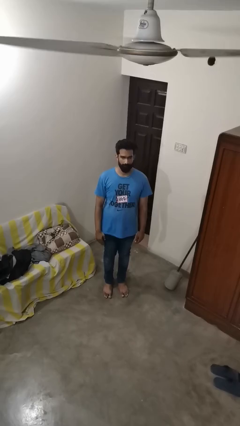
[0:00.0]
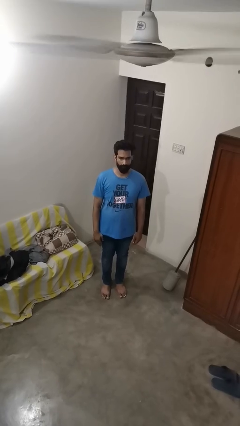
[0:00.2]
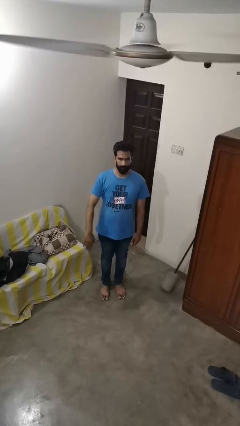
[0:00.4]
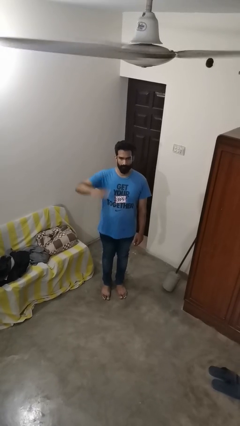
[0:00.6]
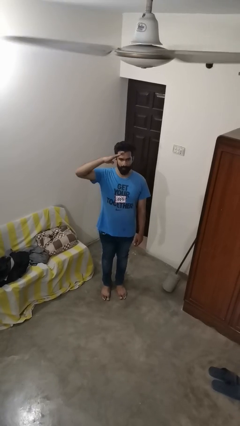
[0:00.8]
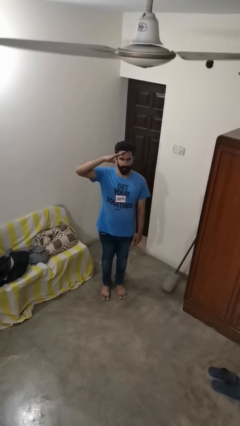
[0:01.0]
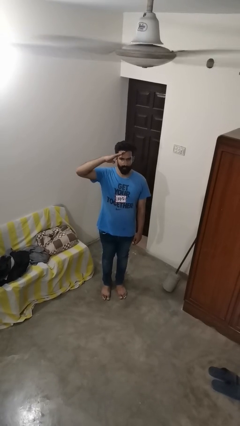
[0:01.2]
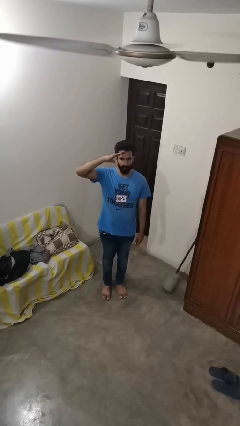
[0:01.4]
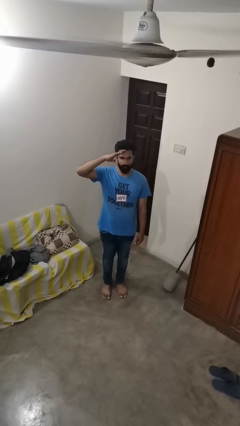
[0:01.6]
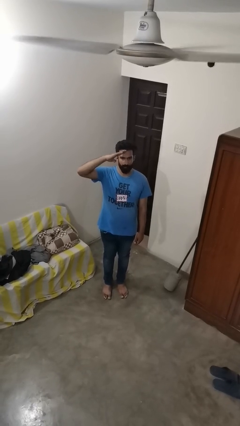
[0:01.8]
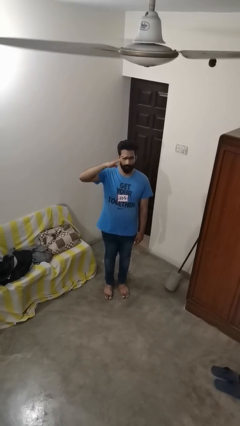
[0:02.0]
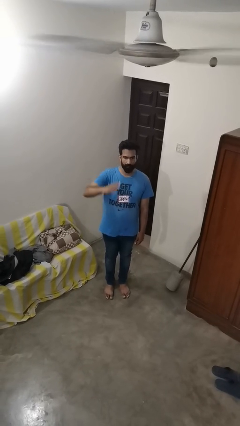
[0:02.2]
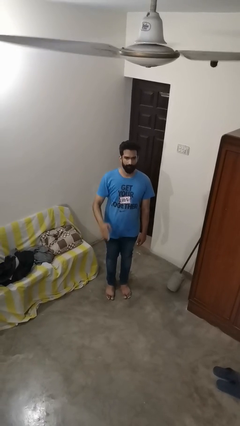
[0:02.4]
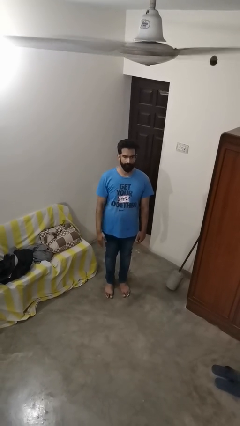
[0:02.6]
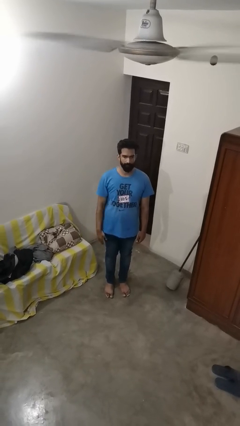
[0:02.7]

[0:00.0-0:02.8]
person salutes

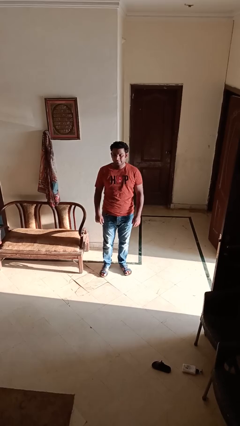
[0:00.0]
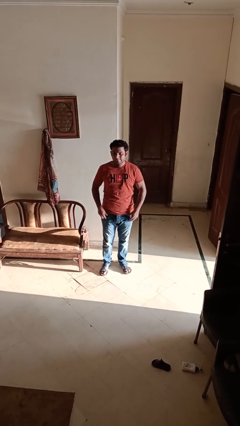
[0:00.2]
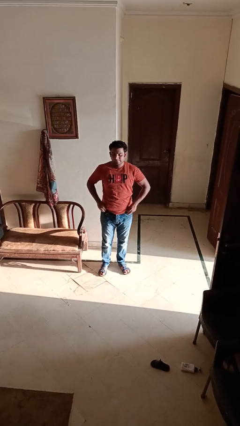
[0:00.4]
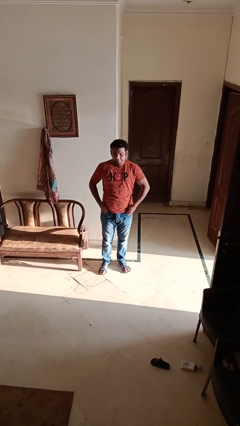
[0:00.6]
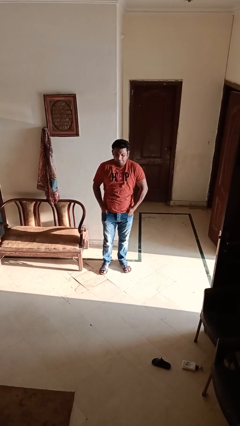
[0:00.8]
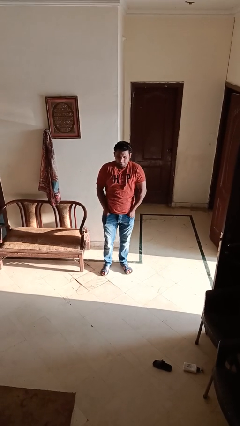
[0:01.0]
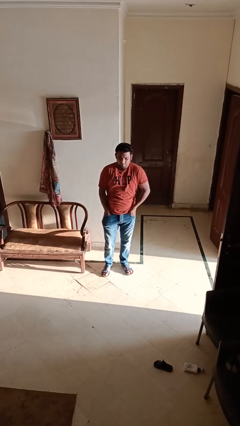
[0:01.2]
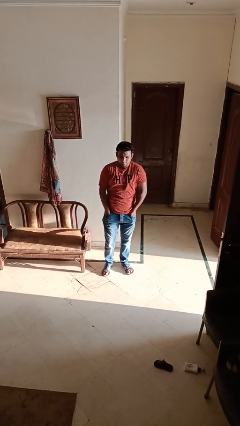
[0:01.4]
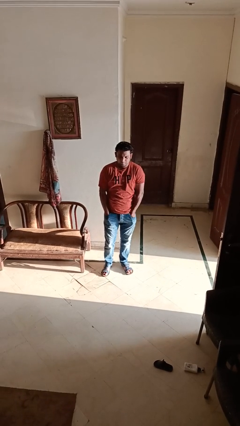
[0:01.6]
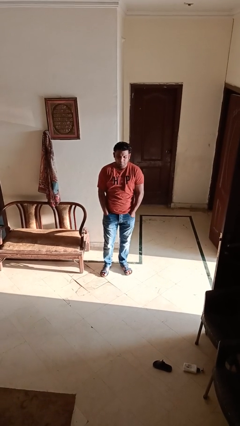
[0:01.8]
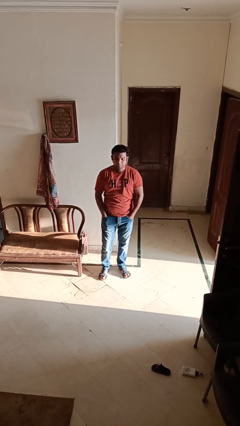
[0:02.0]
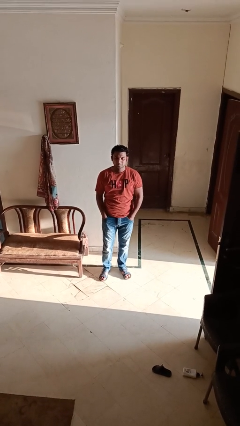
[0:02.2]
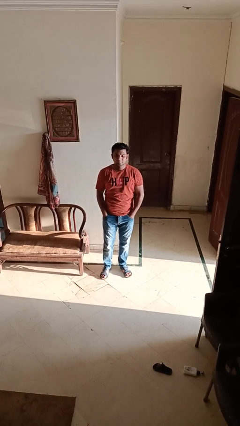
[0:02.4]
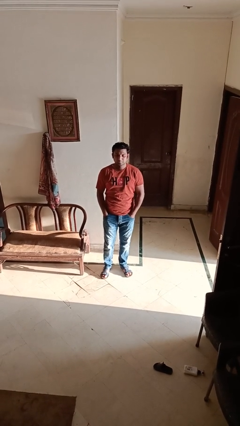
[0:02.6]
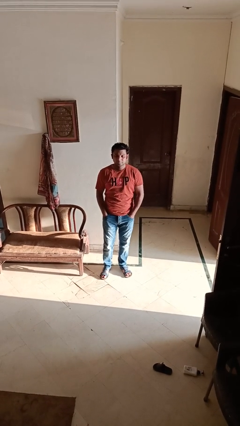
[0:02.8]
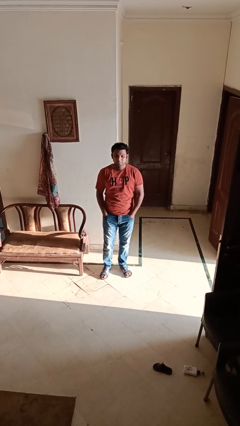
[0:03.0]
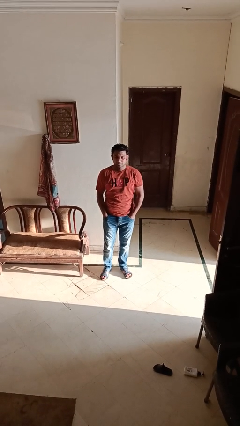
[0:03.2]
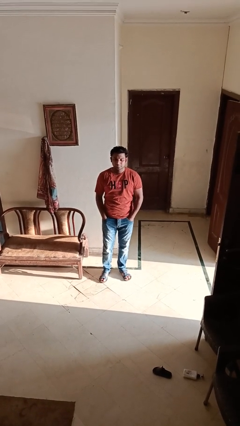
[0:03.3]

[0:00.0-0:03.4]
person puts hands in back pockets

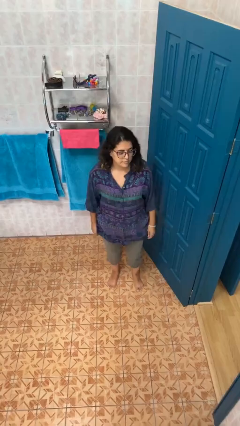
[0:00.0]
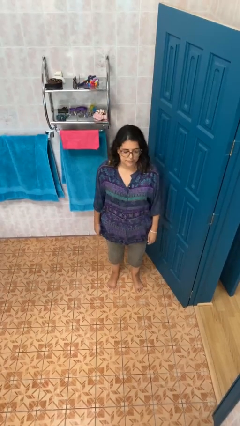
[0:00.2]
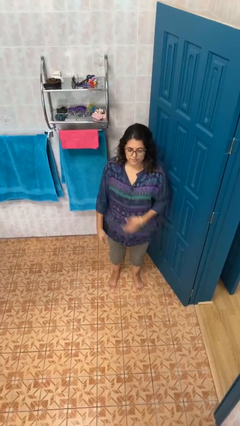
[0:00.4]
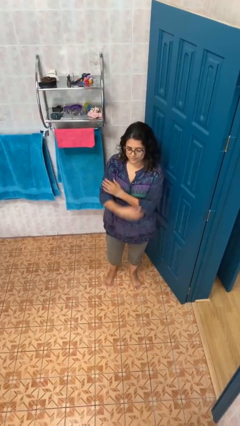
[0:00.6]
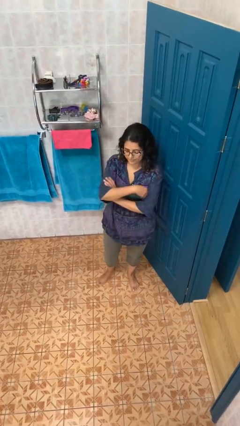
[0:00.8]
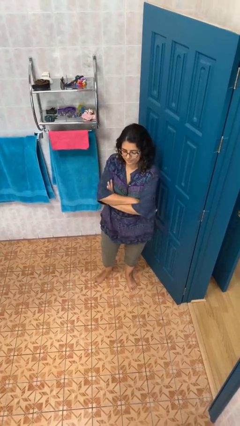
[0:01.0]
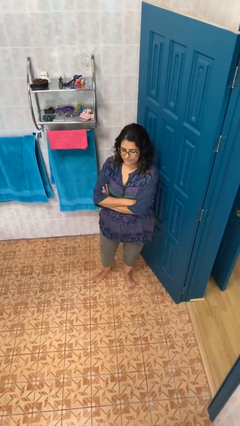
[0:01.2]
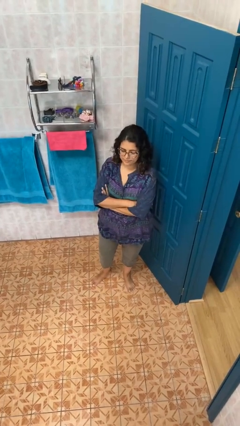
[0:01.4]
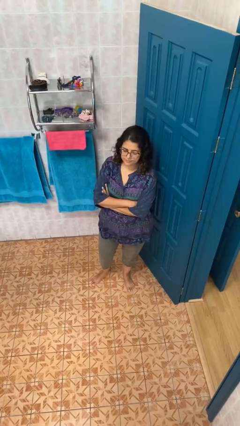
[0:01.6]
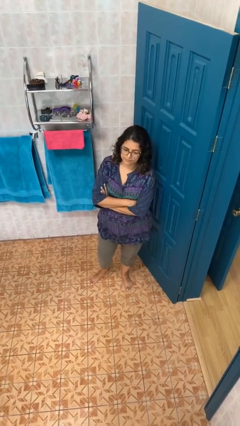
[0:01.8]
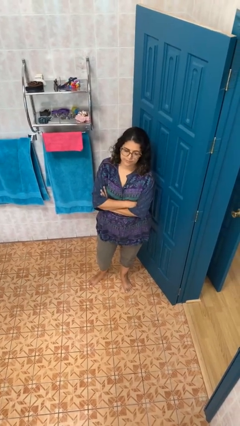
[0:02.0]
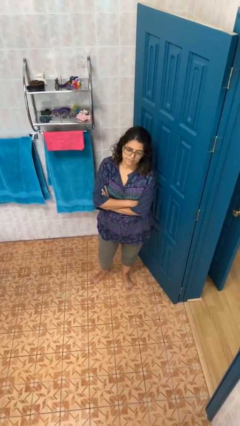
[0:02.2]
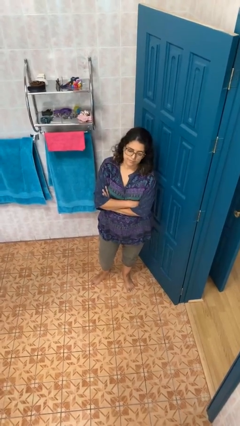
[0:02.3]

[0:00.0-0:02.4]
person crosses arms

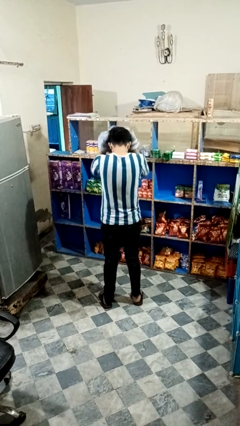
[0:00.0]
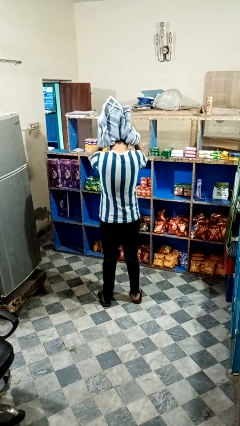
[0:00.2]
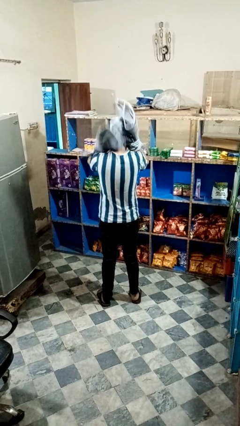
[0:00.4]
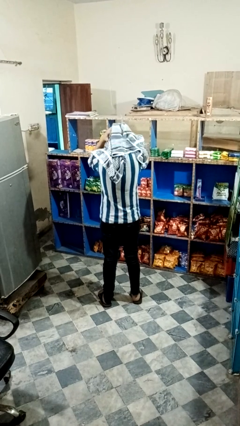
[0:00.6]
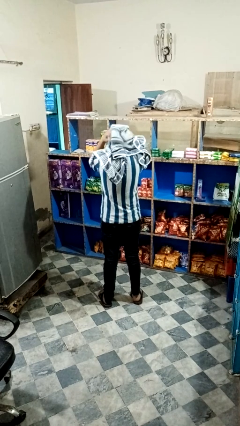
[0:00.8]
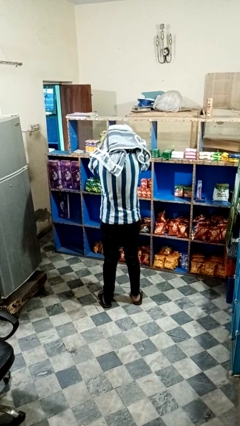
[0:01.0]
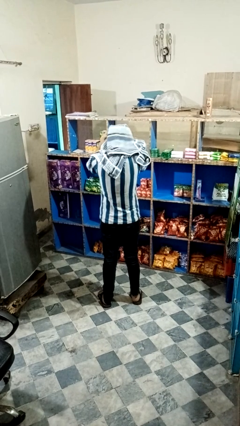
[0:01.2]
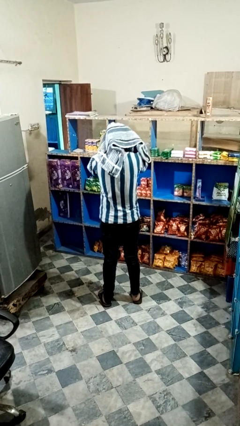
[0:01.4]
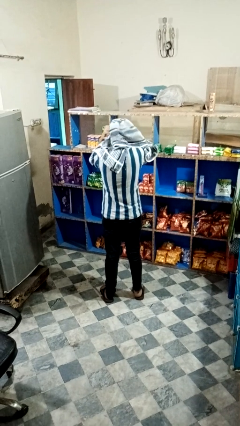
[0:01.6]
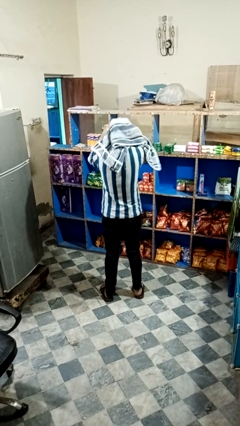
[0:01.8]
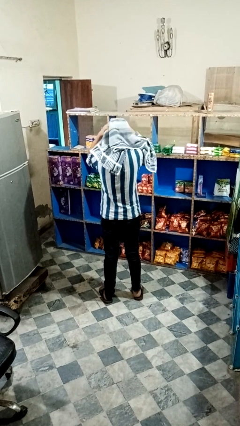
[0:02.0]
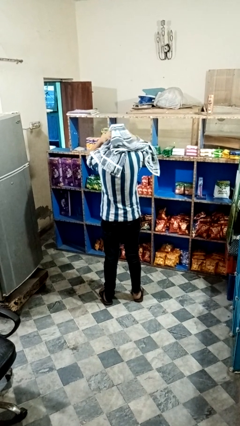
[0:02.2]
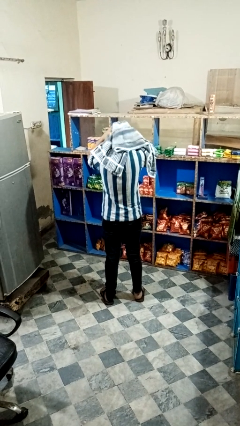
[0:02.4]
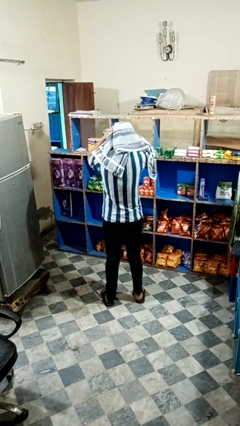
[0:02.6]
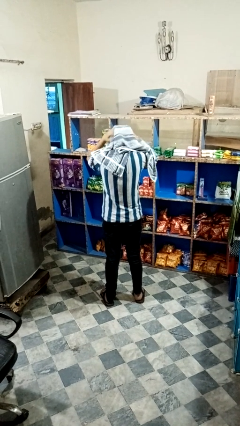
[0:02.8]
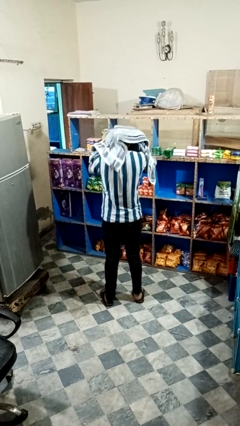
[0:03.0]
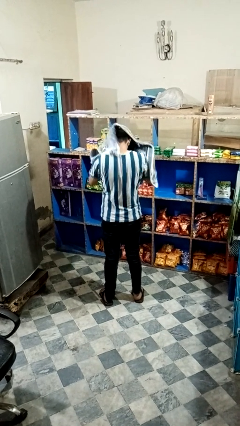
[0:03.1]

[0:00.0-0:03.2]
person dries hair with towel

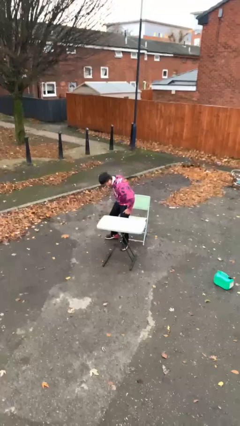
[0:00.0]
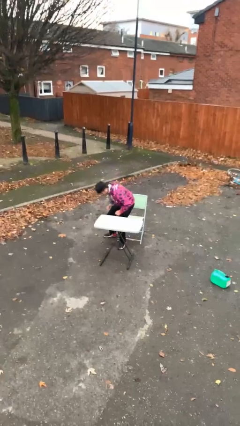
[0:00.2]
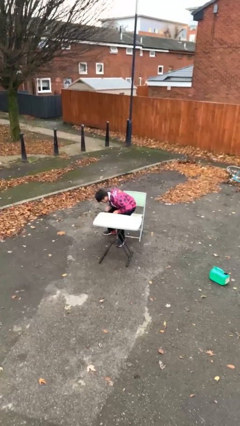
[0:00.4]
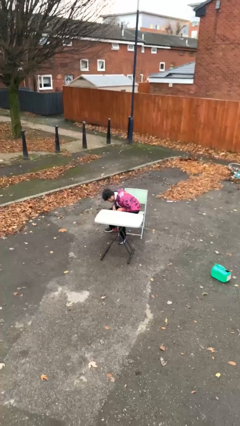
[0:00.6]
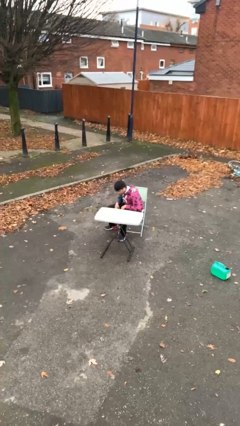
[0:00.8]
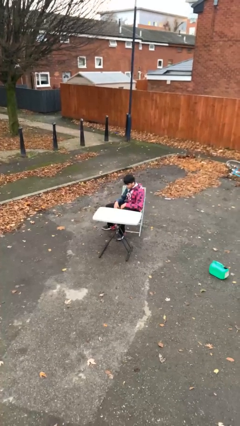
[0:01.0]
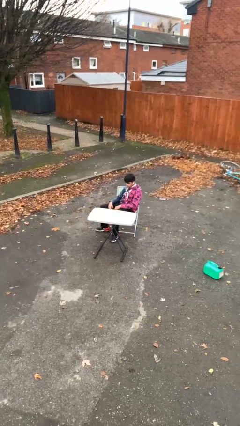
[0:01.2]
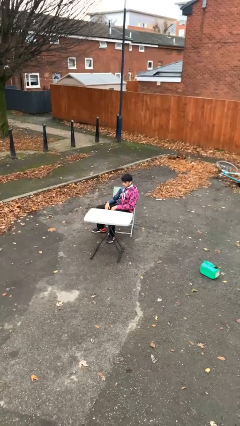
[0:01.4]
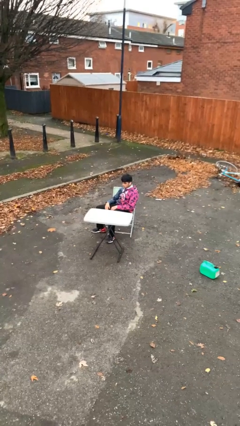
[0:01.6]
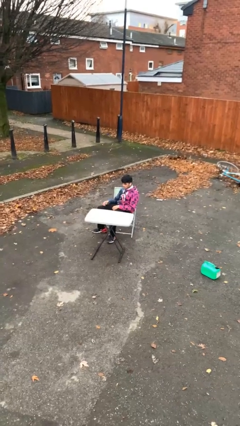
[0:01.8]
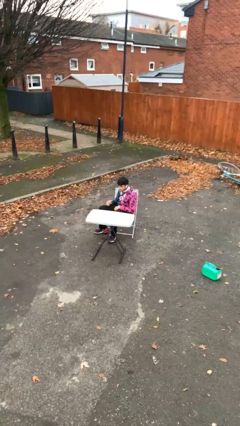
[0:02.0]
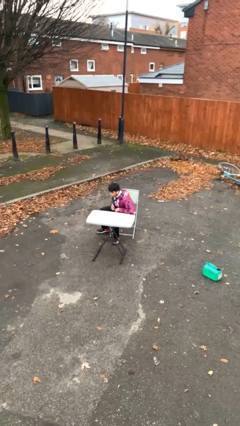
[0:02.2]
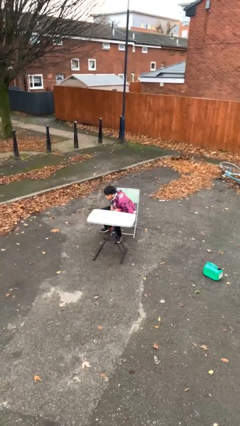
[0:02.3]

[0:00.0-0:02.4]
person sits down

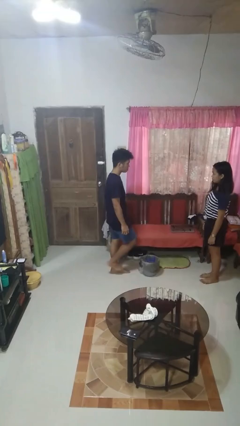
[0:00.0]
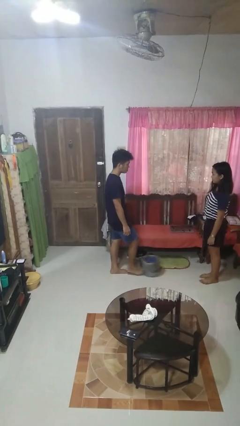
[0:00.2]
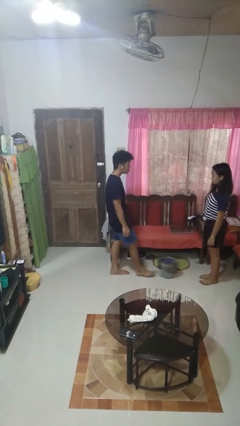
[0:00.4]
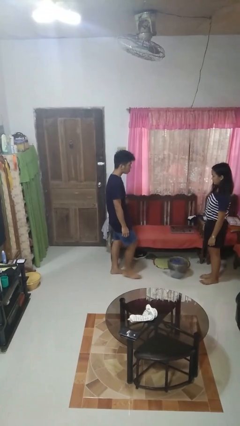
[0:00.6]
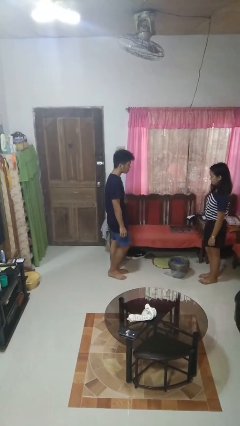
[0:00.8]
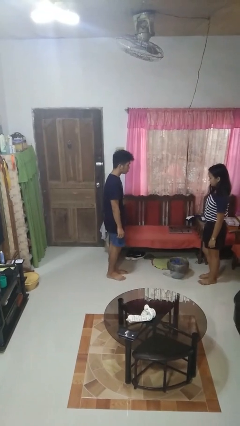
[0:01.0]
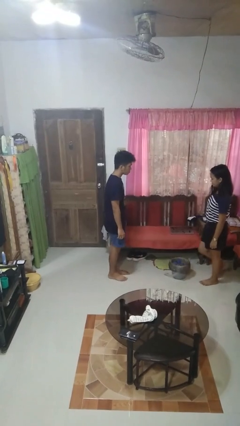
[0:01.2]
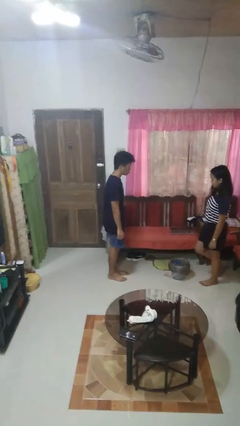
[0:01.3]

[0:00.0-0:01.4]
person kicks object to person

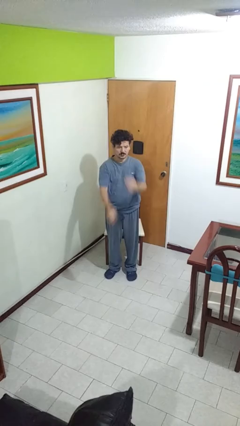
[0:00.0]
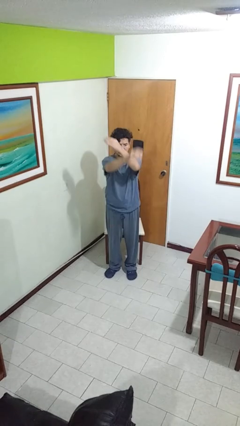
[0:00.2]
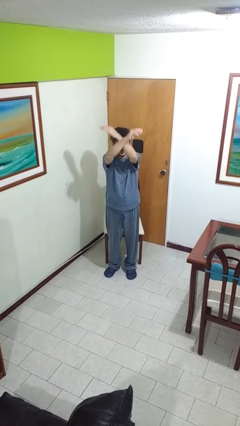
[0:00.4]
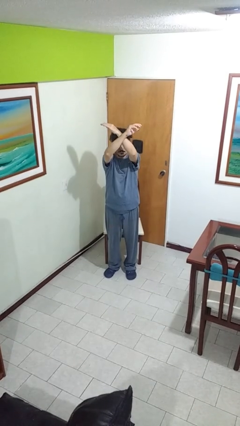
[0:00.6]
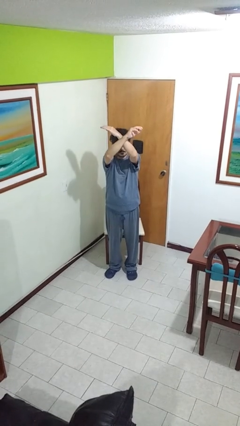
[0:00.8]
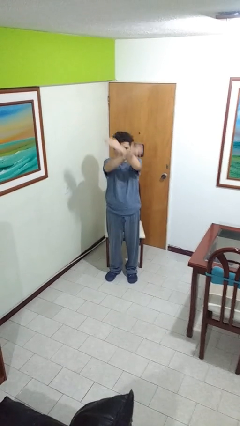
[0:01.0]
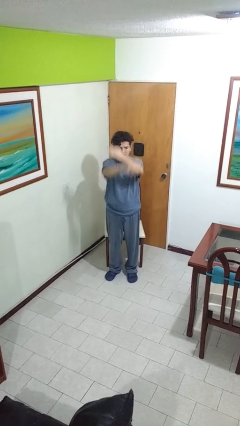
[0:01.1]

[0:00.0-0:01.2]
person gestures arms x

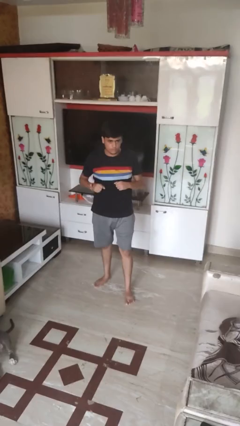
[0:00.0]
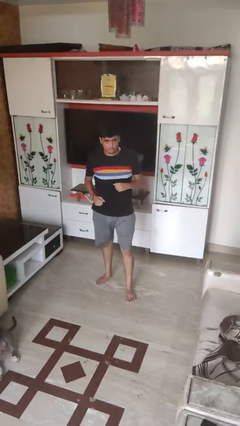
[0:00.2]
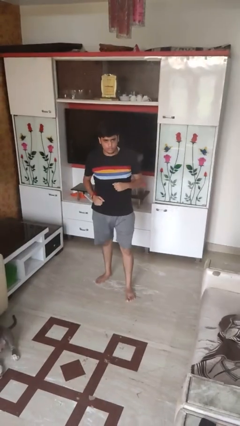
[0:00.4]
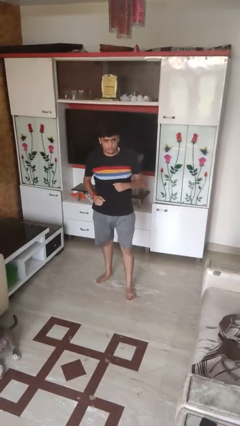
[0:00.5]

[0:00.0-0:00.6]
person punches
